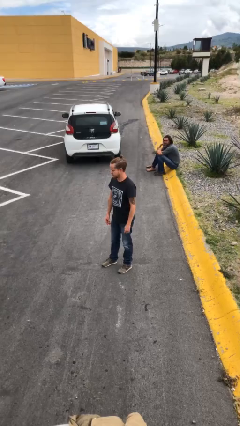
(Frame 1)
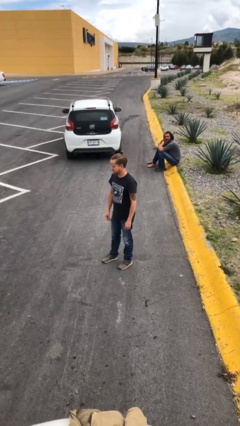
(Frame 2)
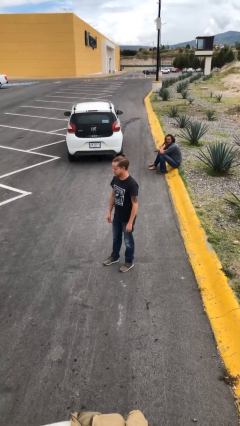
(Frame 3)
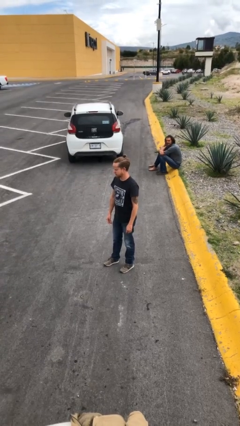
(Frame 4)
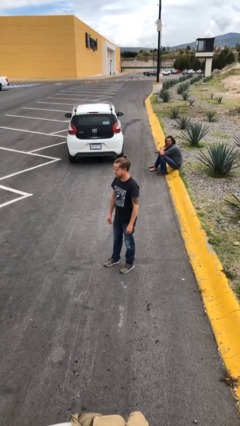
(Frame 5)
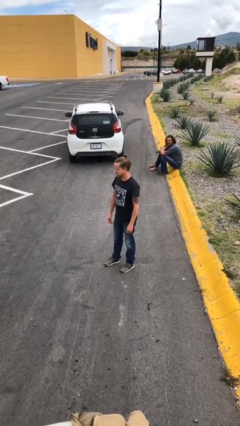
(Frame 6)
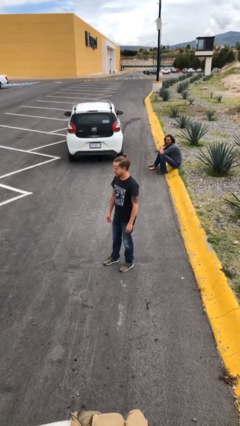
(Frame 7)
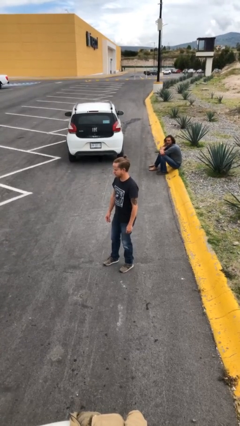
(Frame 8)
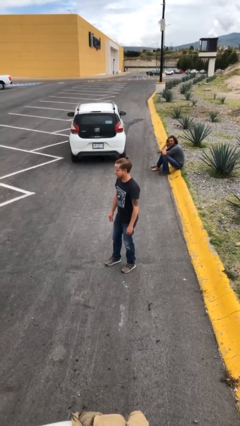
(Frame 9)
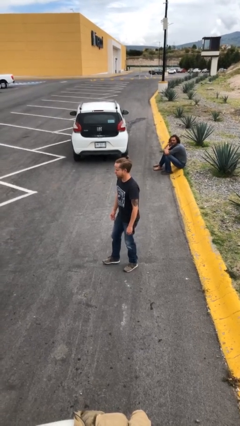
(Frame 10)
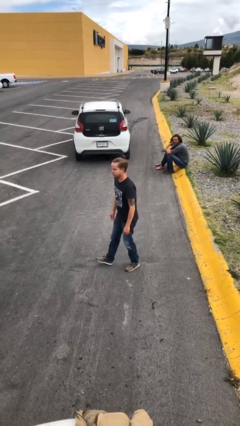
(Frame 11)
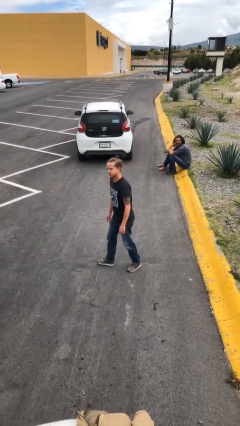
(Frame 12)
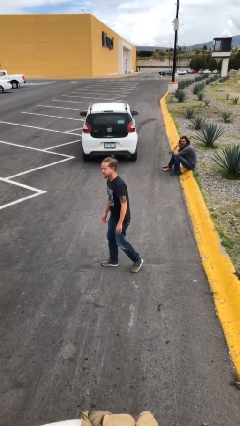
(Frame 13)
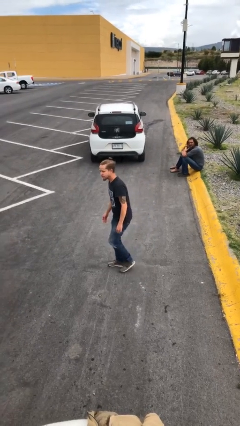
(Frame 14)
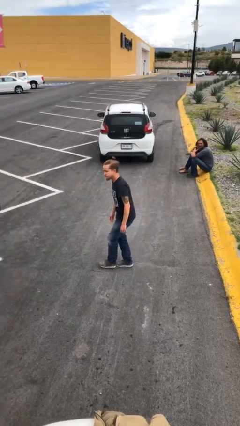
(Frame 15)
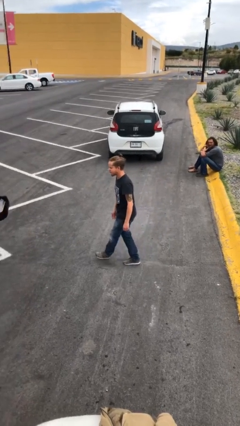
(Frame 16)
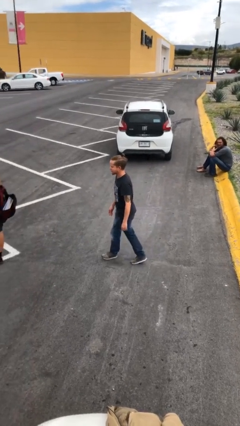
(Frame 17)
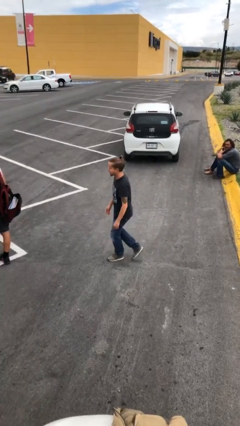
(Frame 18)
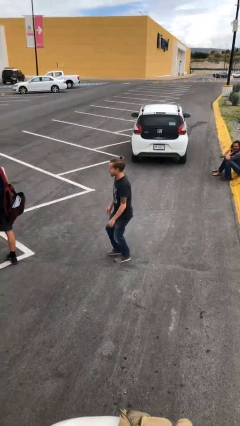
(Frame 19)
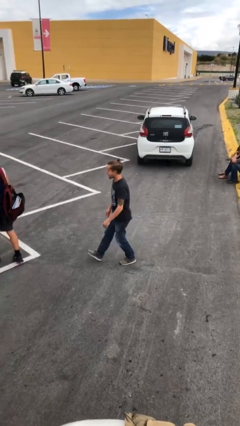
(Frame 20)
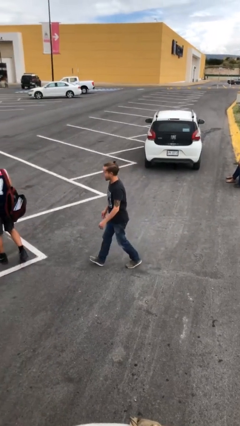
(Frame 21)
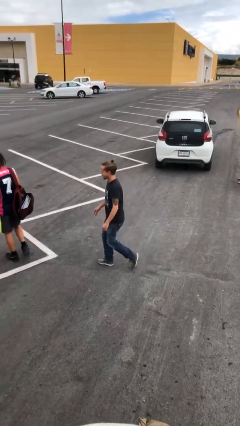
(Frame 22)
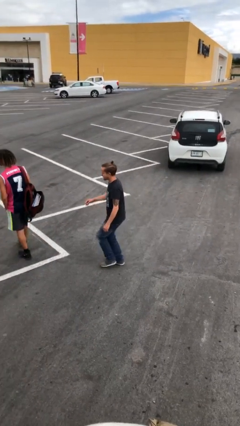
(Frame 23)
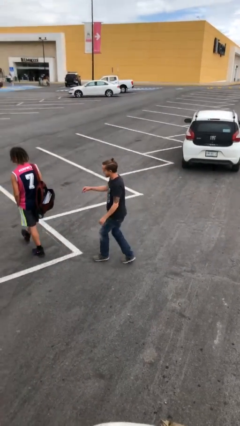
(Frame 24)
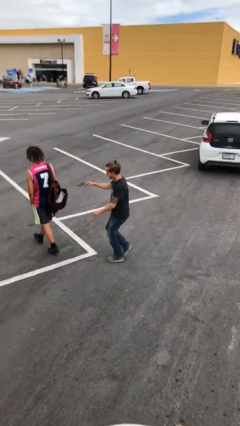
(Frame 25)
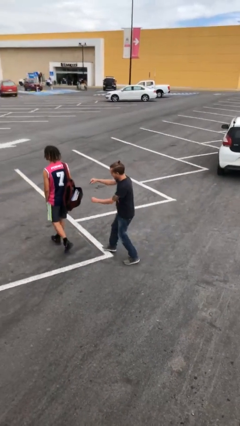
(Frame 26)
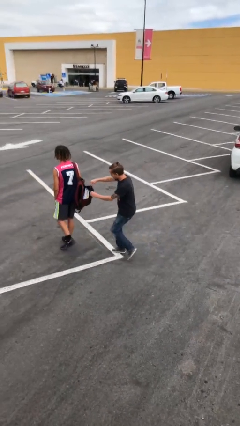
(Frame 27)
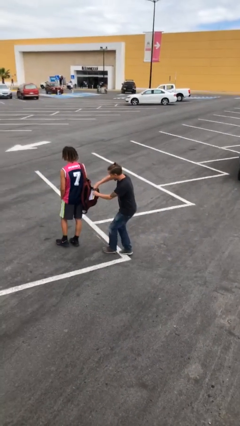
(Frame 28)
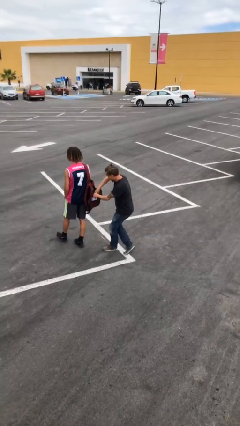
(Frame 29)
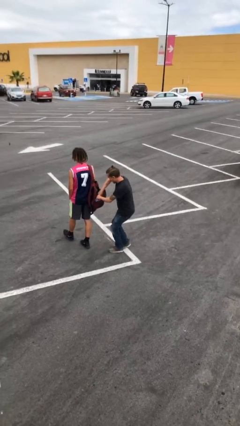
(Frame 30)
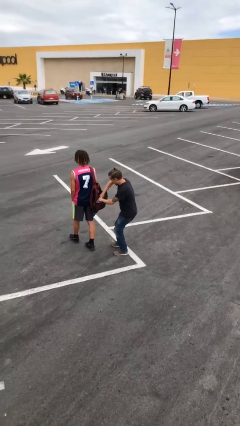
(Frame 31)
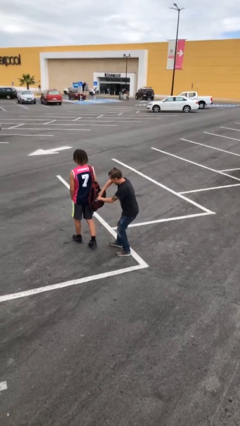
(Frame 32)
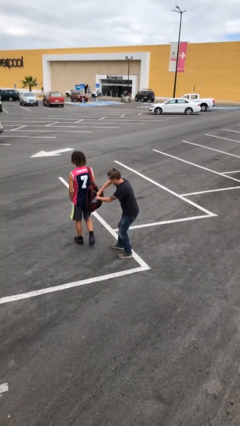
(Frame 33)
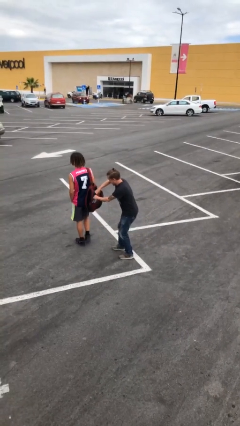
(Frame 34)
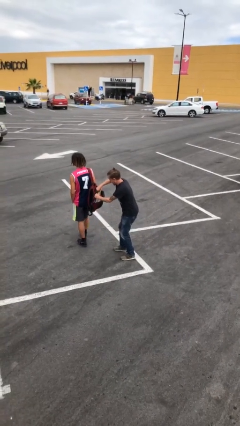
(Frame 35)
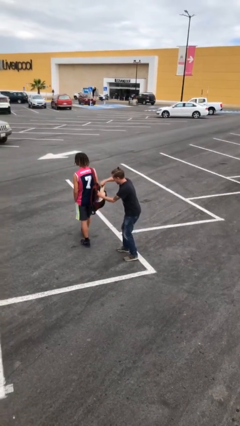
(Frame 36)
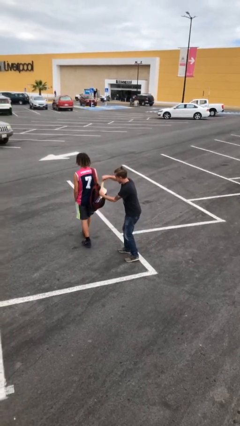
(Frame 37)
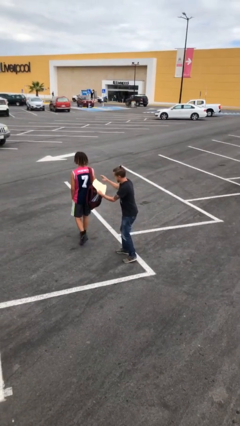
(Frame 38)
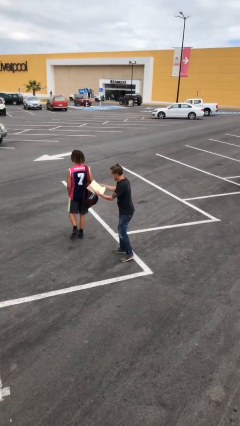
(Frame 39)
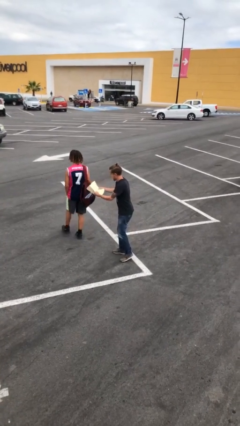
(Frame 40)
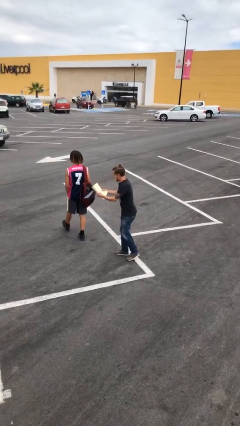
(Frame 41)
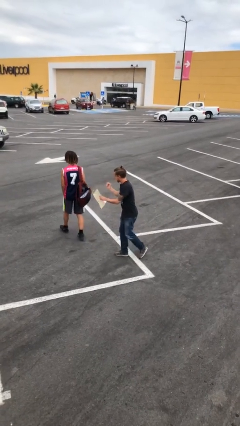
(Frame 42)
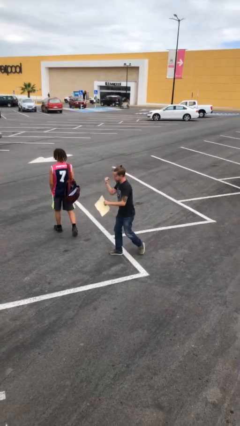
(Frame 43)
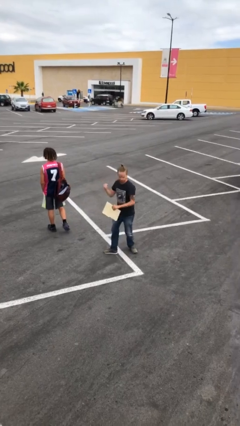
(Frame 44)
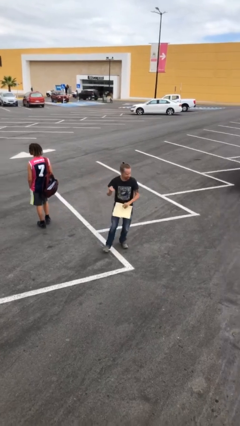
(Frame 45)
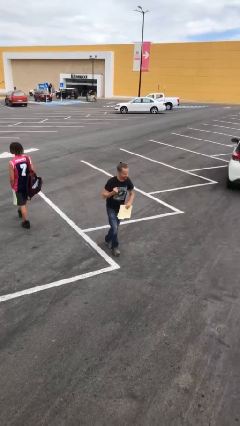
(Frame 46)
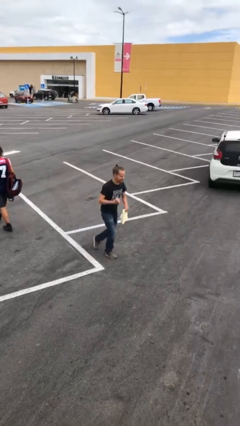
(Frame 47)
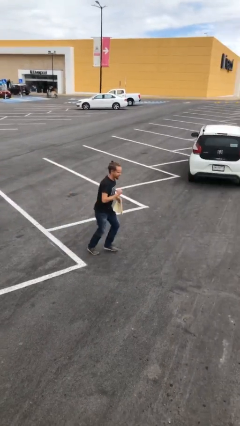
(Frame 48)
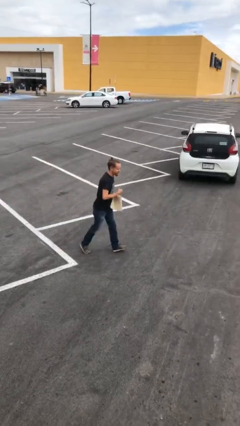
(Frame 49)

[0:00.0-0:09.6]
person steals object from person

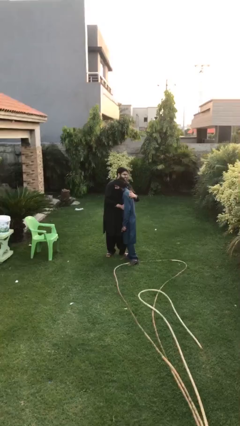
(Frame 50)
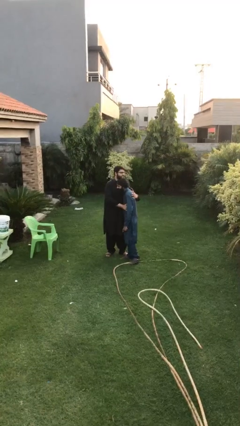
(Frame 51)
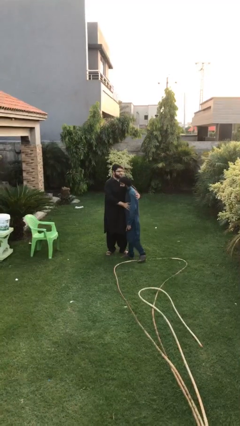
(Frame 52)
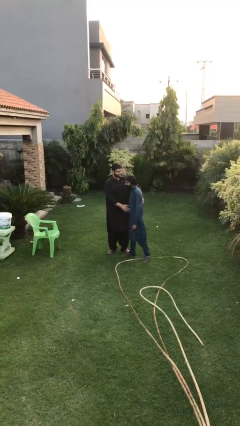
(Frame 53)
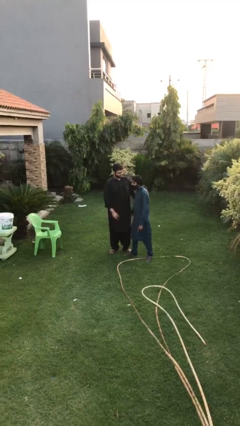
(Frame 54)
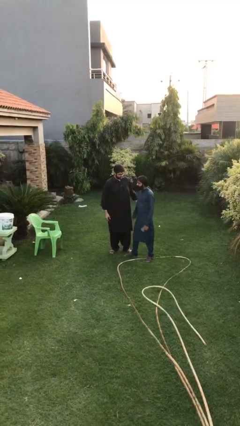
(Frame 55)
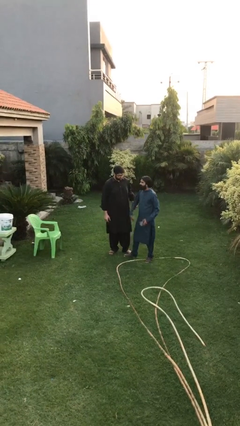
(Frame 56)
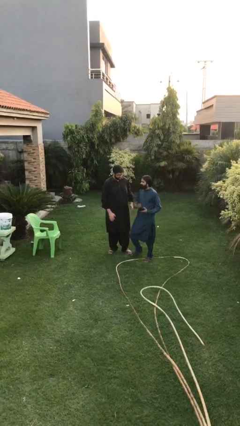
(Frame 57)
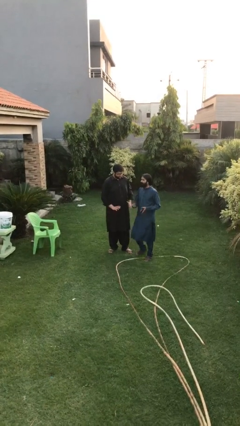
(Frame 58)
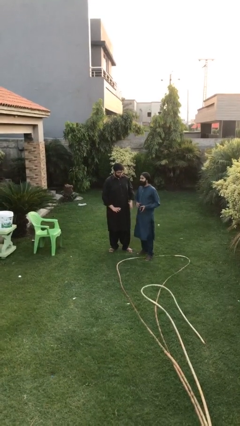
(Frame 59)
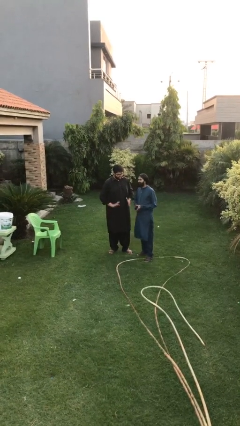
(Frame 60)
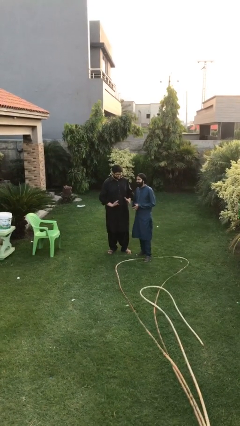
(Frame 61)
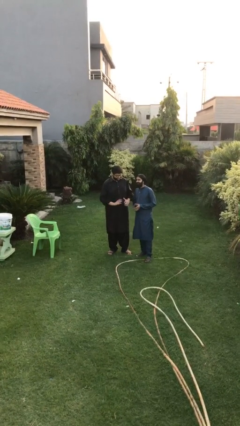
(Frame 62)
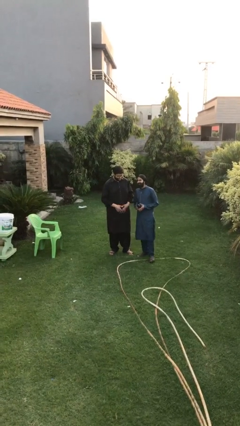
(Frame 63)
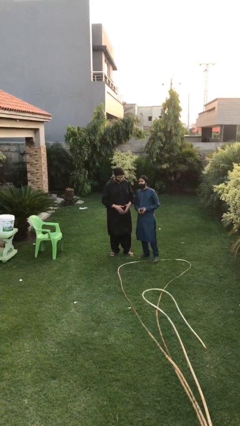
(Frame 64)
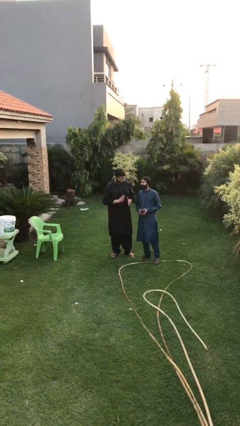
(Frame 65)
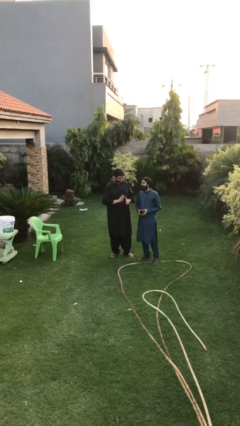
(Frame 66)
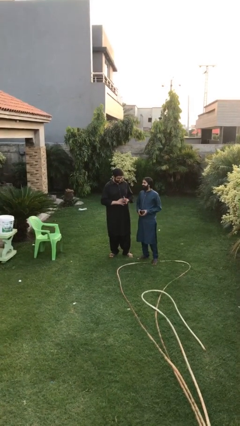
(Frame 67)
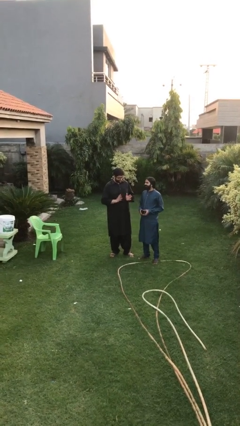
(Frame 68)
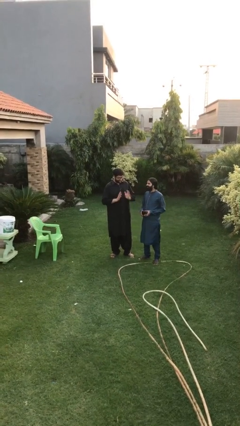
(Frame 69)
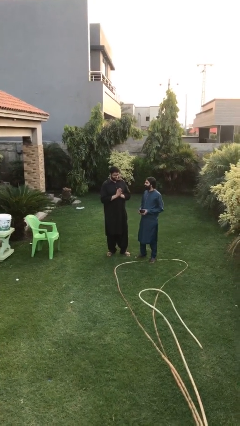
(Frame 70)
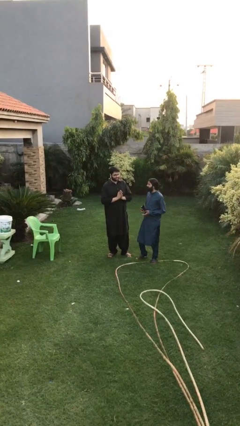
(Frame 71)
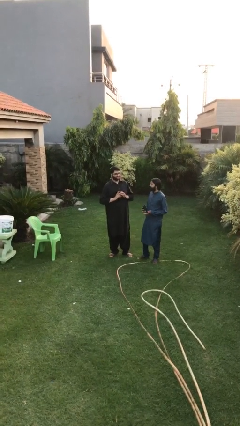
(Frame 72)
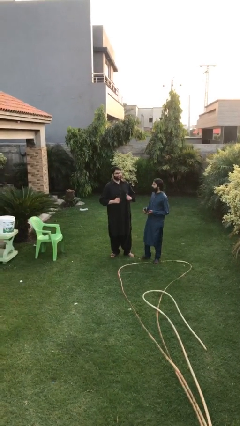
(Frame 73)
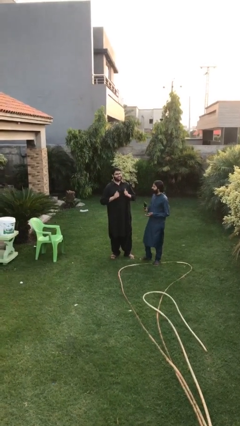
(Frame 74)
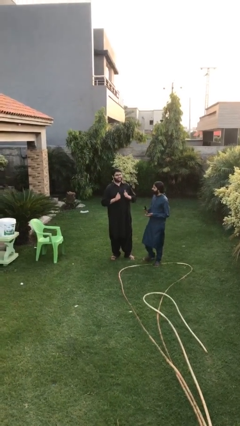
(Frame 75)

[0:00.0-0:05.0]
person talks to person

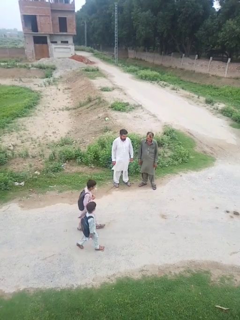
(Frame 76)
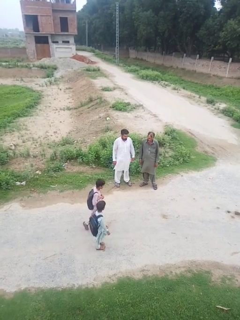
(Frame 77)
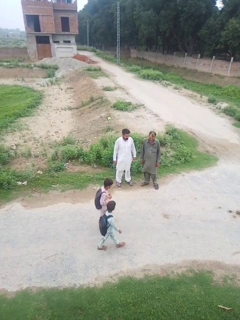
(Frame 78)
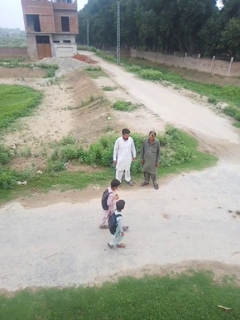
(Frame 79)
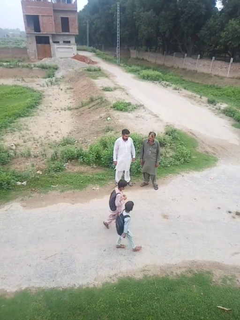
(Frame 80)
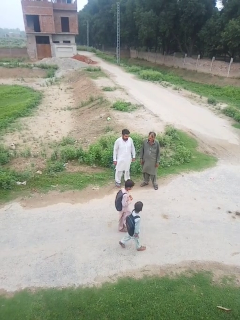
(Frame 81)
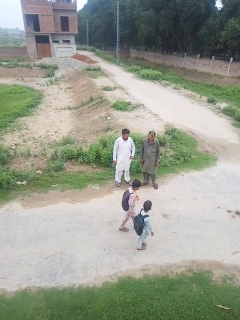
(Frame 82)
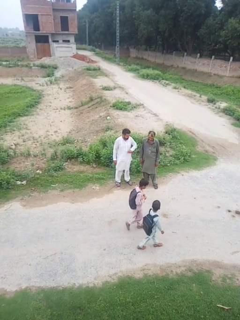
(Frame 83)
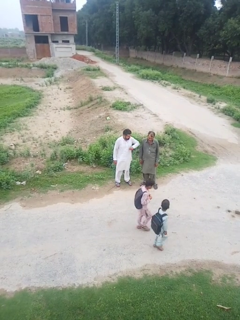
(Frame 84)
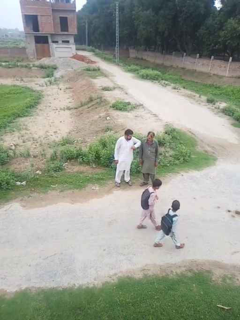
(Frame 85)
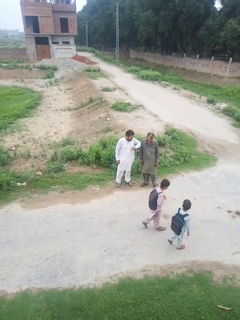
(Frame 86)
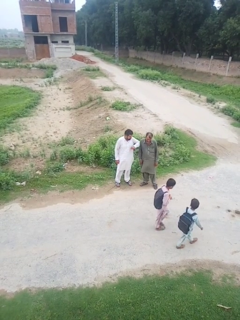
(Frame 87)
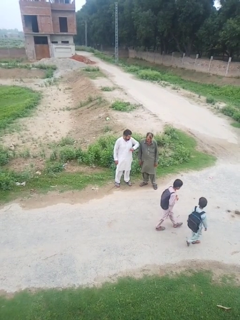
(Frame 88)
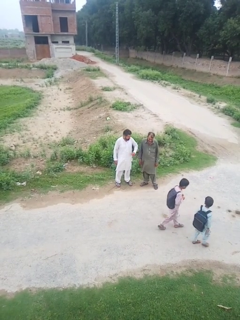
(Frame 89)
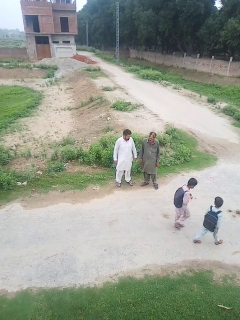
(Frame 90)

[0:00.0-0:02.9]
person nudges person with elbow

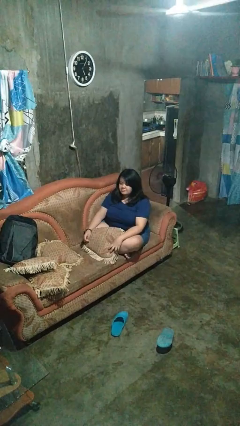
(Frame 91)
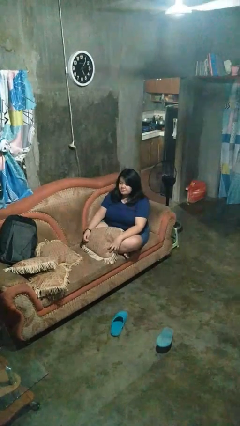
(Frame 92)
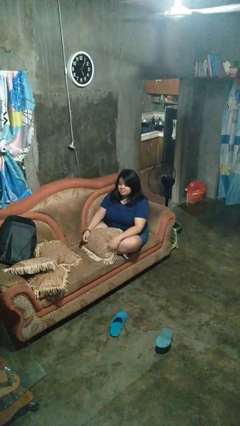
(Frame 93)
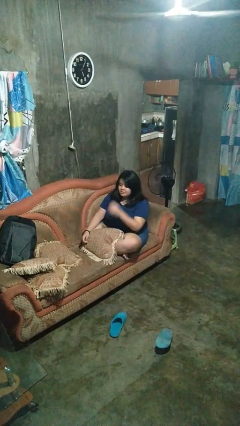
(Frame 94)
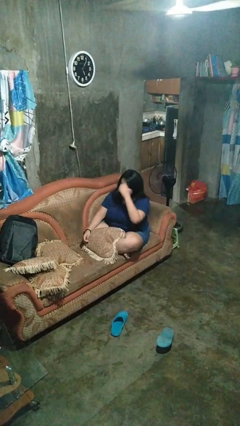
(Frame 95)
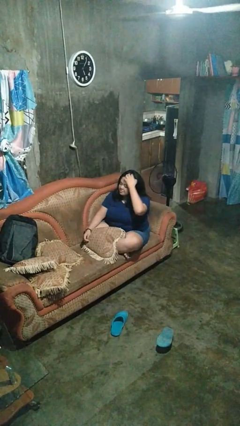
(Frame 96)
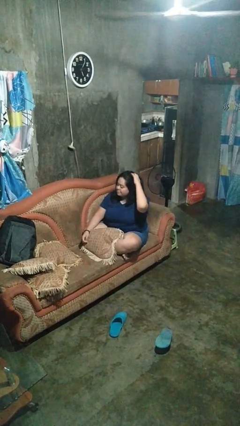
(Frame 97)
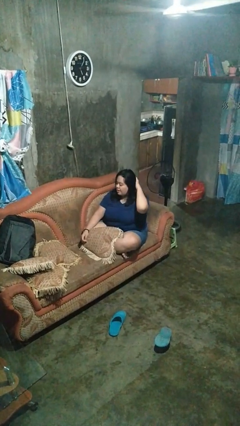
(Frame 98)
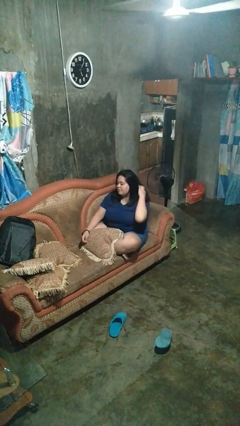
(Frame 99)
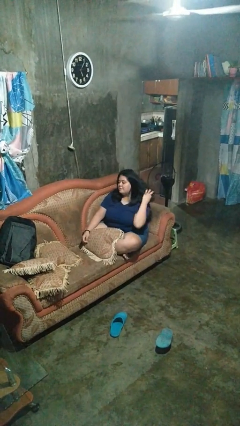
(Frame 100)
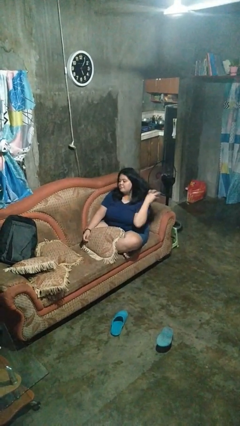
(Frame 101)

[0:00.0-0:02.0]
person strokes hair
